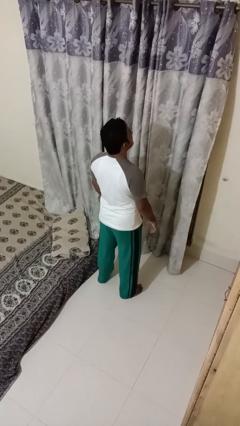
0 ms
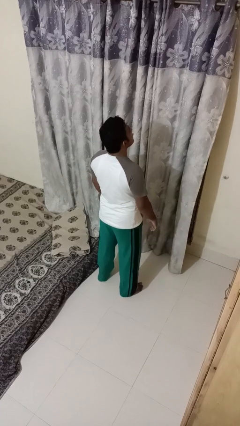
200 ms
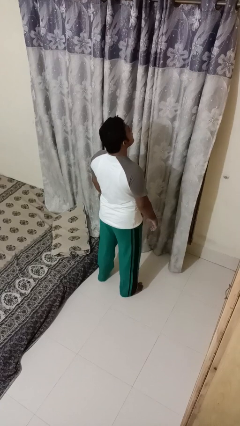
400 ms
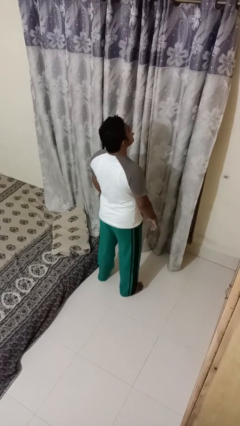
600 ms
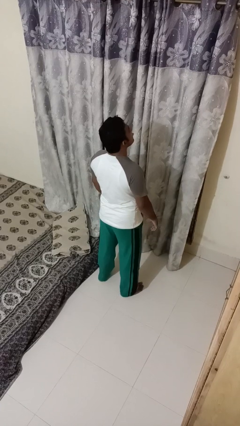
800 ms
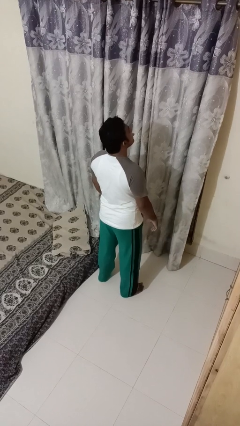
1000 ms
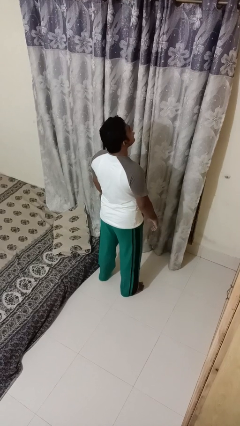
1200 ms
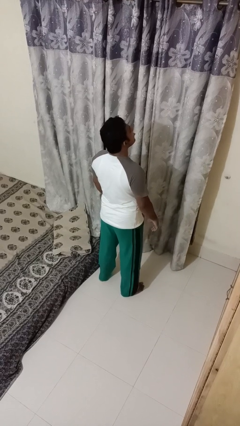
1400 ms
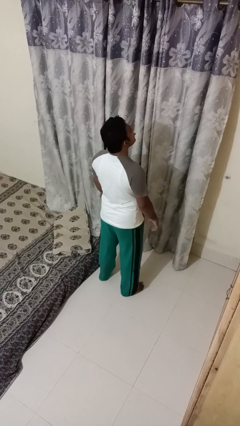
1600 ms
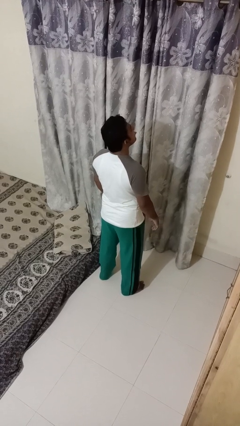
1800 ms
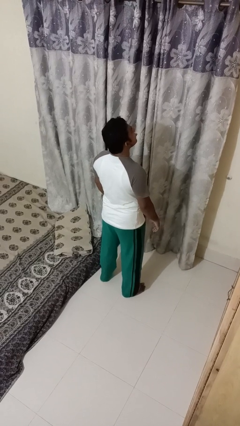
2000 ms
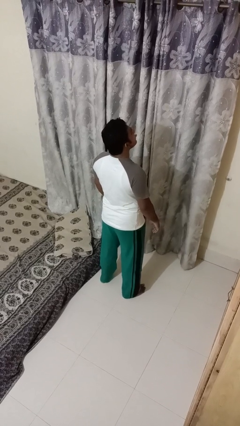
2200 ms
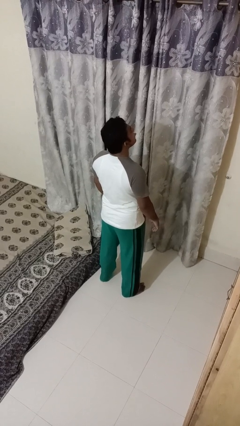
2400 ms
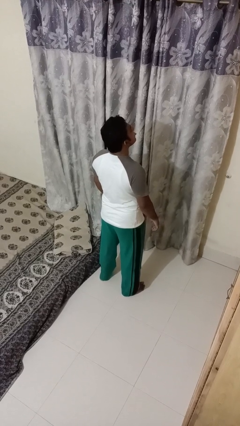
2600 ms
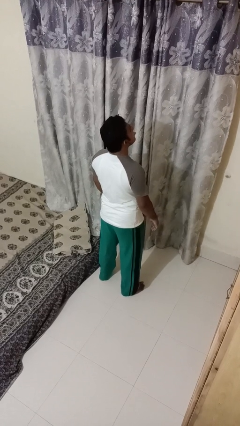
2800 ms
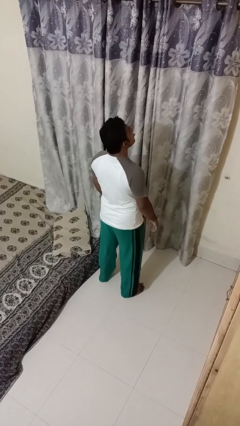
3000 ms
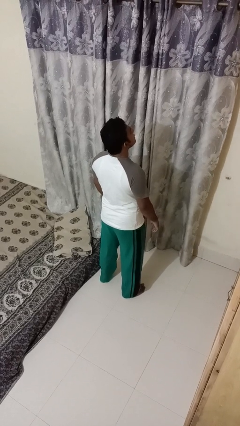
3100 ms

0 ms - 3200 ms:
person sticks out tongue

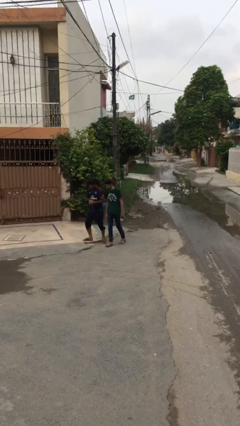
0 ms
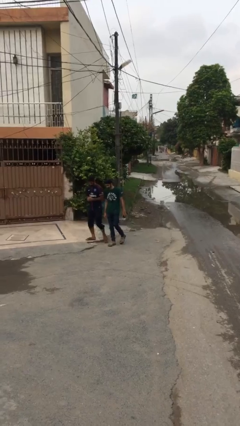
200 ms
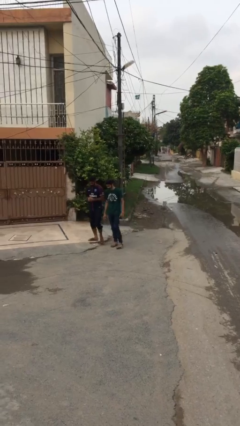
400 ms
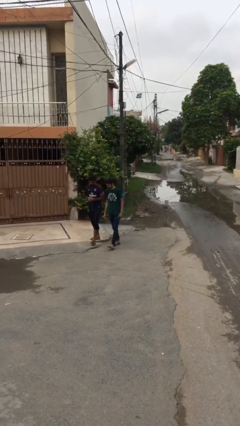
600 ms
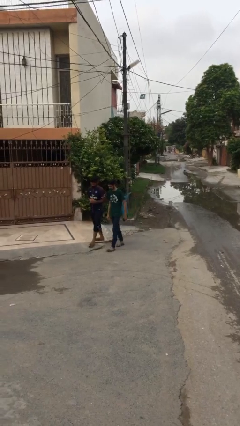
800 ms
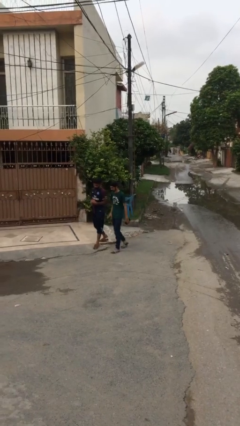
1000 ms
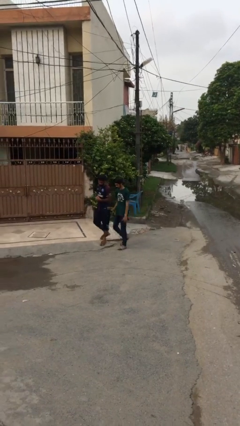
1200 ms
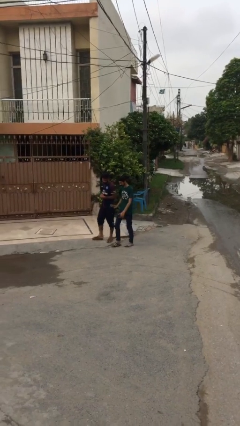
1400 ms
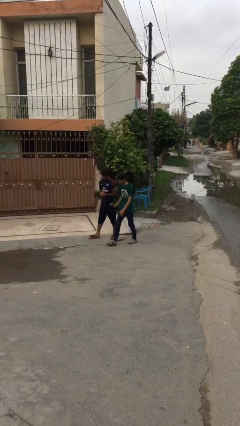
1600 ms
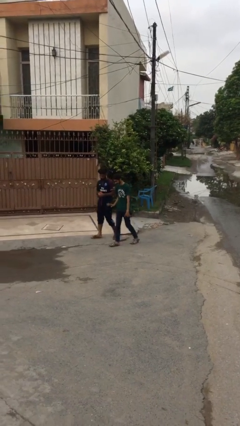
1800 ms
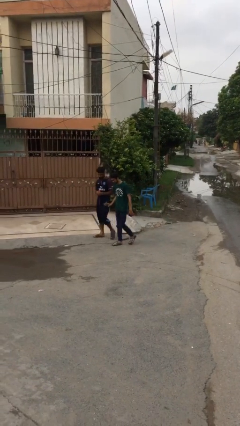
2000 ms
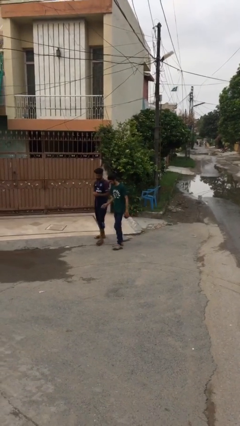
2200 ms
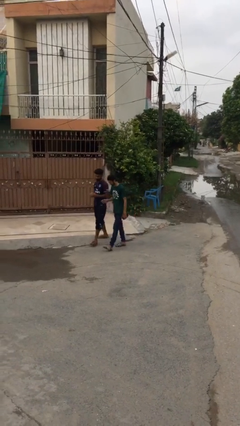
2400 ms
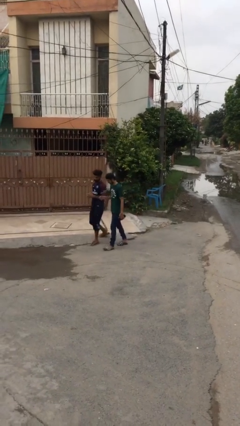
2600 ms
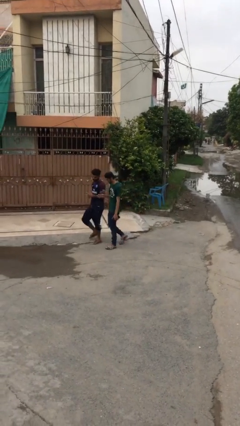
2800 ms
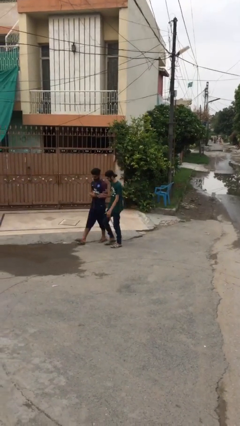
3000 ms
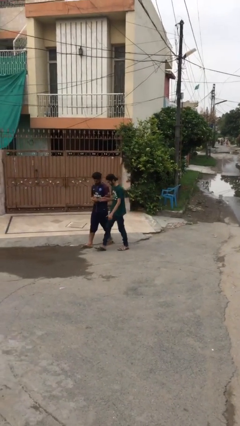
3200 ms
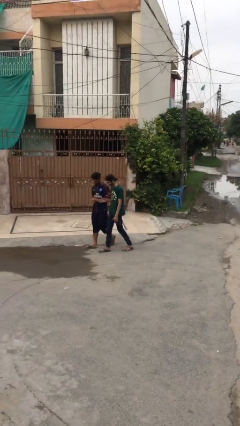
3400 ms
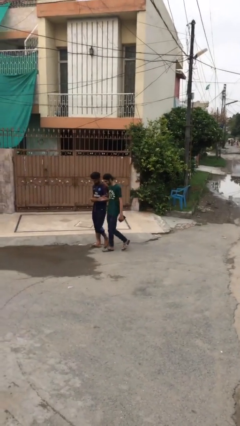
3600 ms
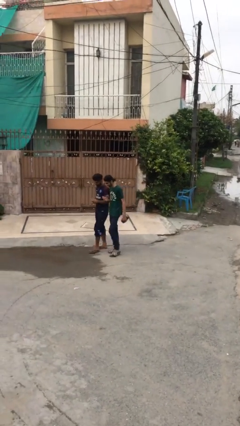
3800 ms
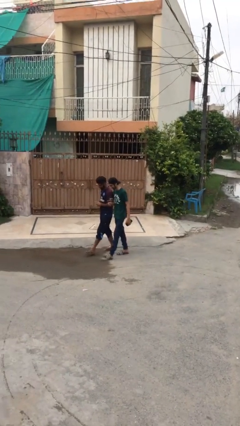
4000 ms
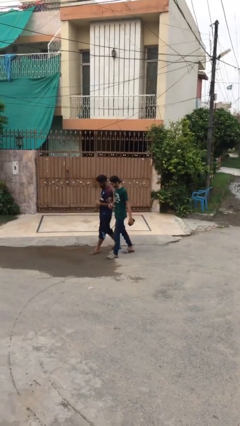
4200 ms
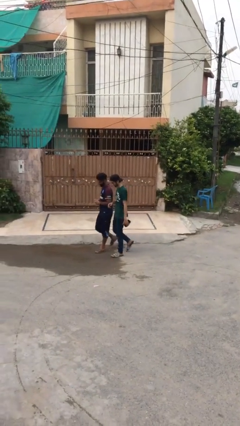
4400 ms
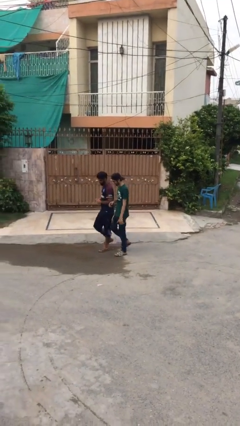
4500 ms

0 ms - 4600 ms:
person talks to person

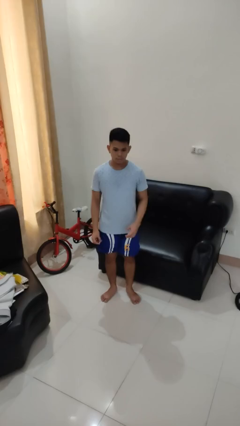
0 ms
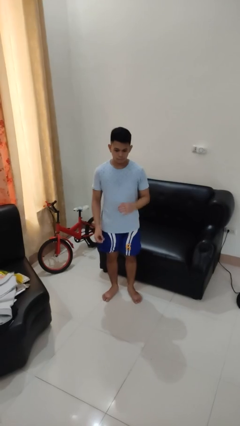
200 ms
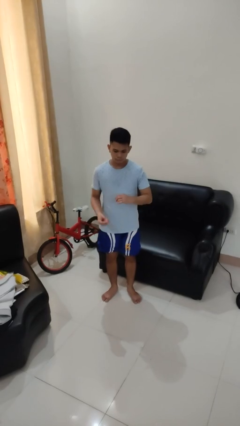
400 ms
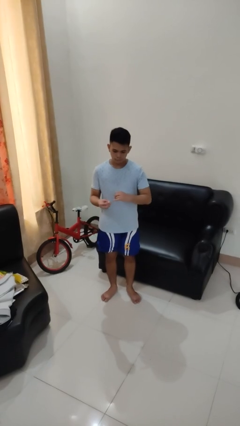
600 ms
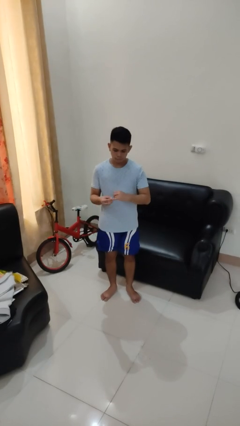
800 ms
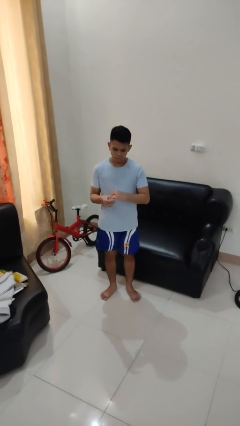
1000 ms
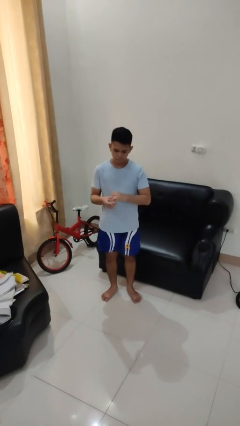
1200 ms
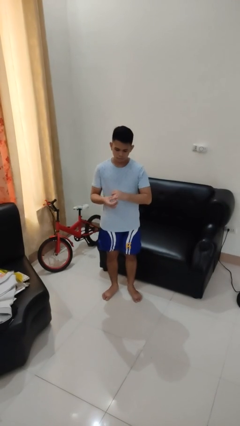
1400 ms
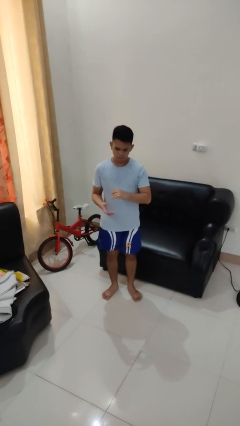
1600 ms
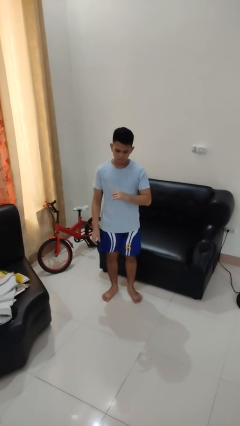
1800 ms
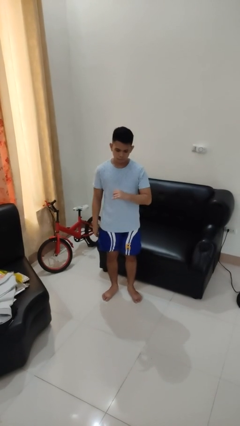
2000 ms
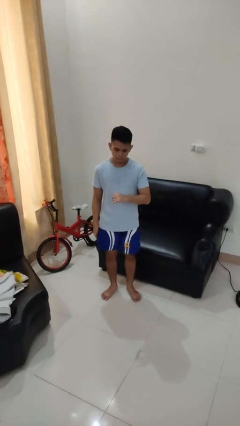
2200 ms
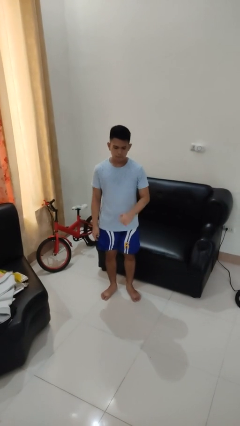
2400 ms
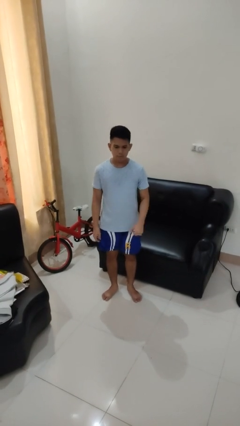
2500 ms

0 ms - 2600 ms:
person puts on ring

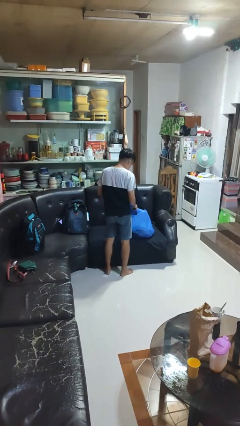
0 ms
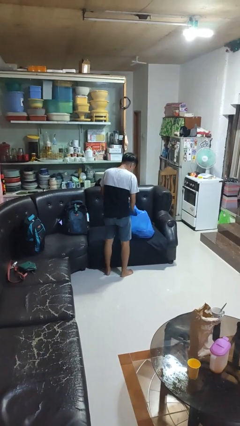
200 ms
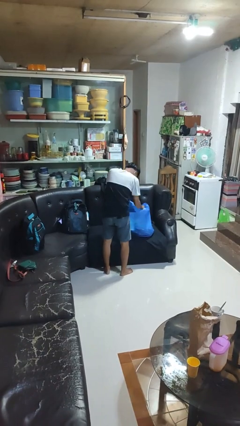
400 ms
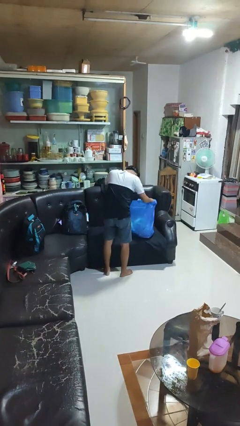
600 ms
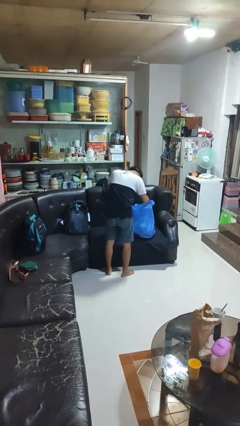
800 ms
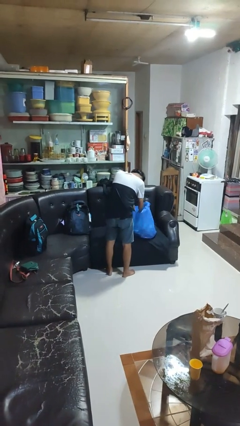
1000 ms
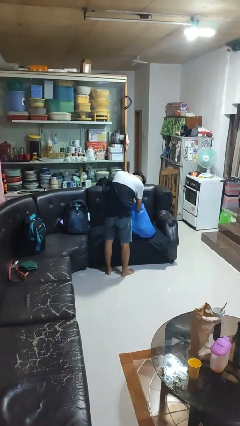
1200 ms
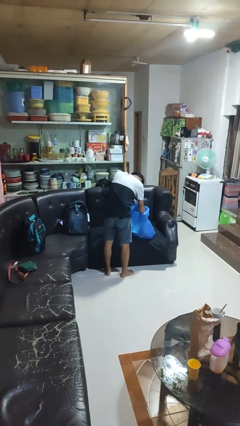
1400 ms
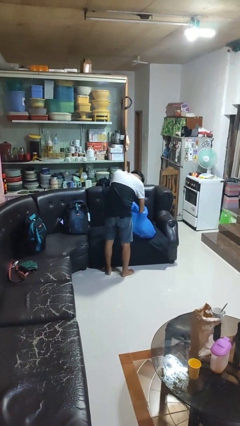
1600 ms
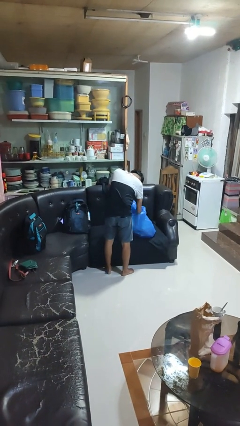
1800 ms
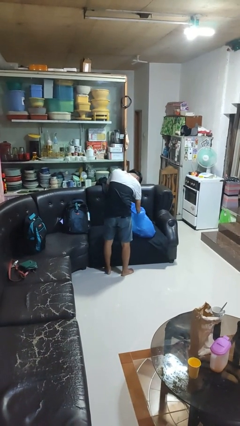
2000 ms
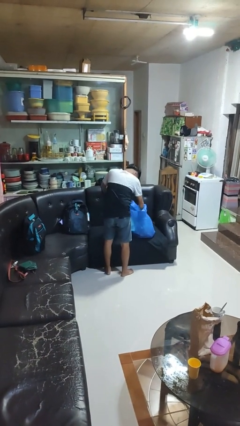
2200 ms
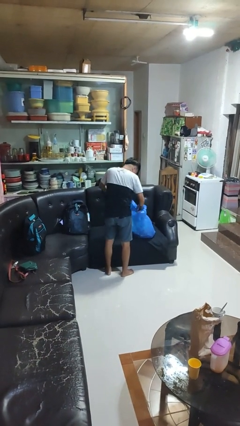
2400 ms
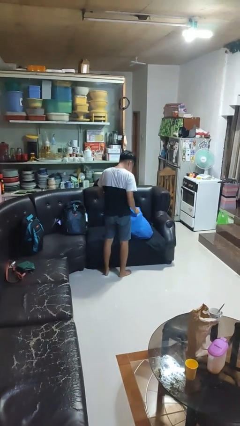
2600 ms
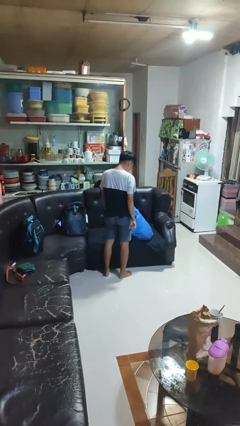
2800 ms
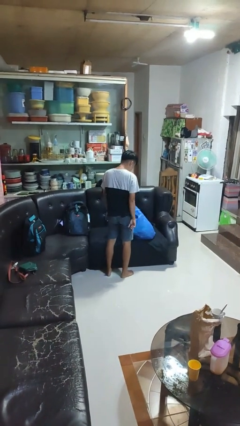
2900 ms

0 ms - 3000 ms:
person searches in bag

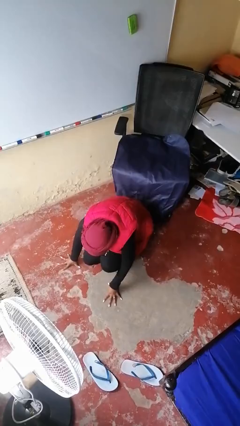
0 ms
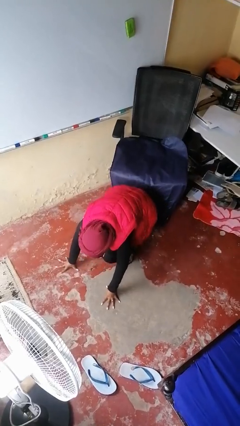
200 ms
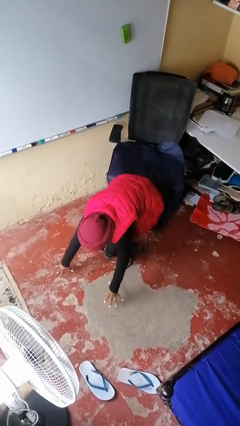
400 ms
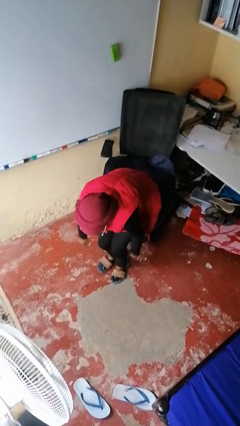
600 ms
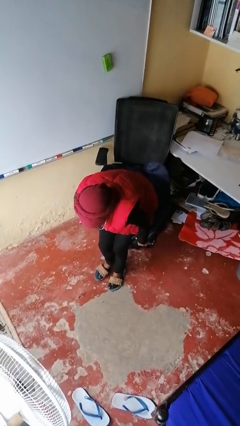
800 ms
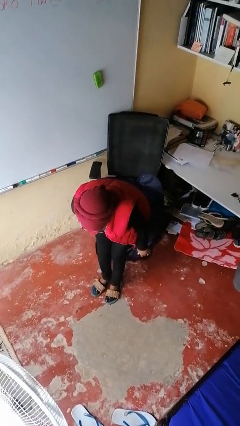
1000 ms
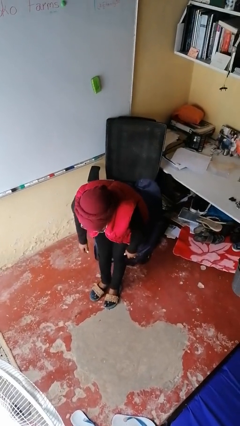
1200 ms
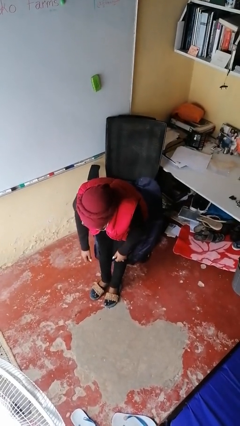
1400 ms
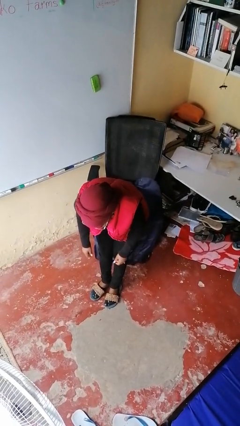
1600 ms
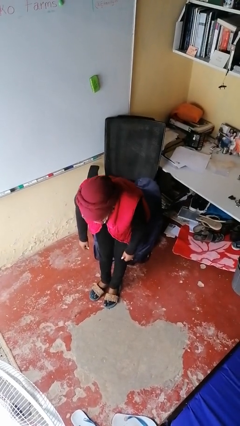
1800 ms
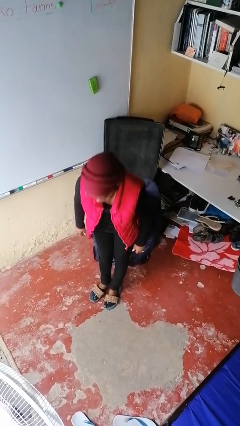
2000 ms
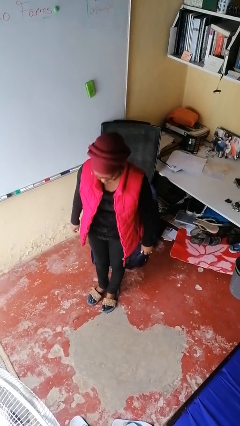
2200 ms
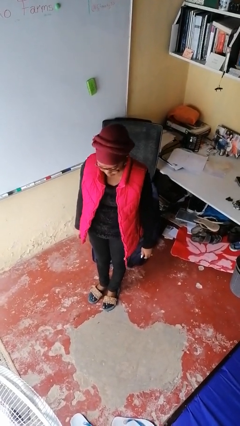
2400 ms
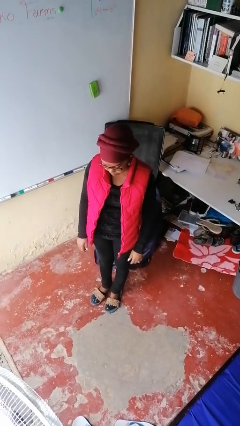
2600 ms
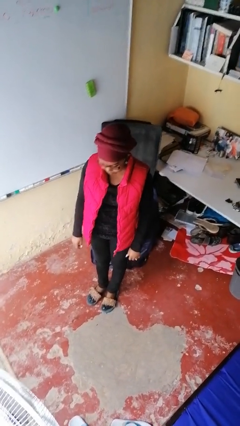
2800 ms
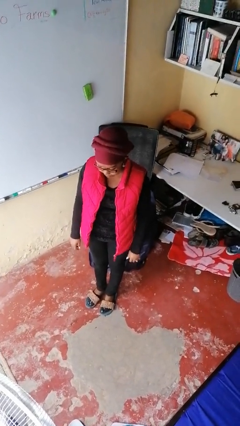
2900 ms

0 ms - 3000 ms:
person stands up from floor

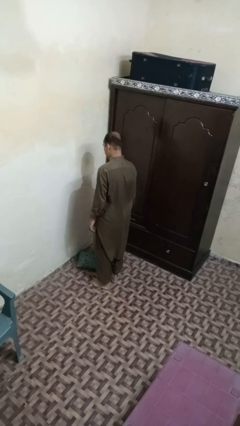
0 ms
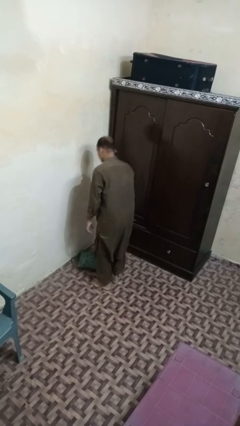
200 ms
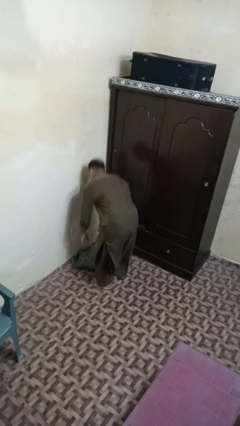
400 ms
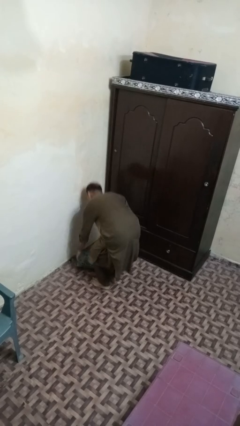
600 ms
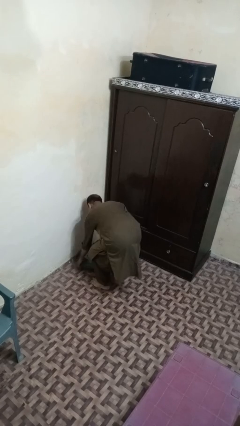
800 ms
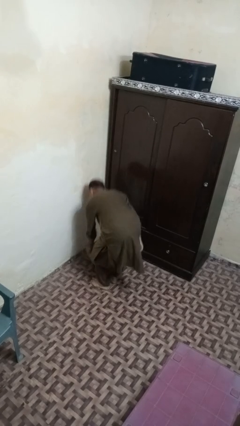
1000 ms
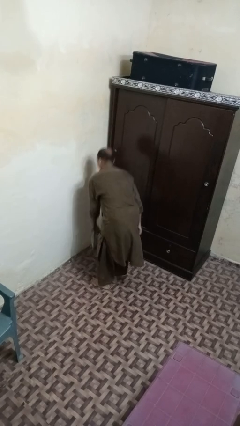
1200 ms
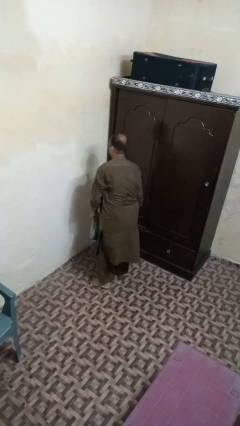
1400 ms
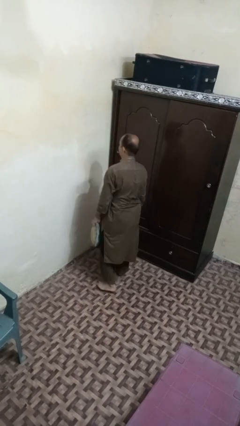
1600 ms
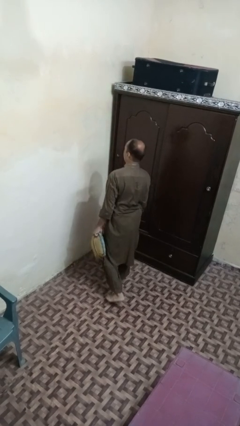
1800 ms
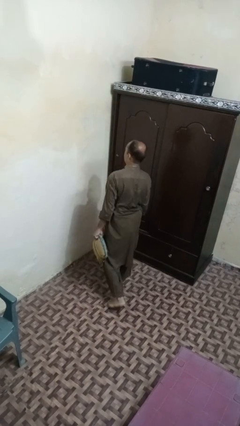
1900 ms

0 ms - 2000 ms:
person picks up object from floor
